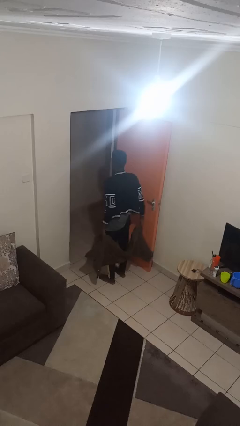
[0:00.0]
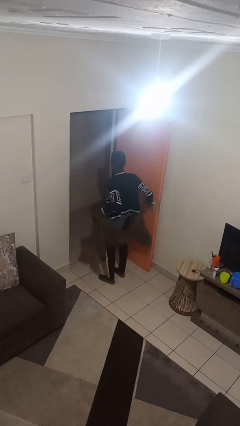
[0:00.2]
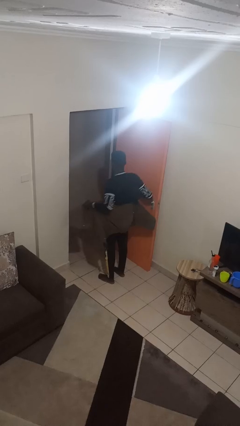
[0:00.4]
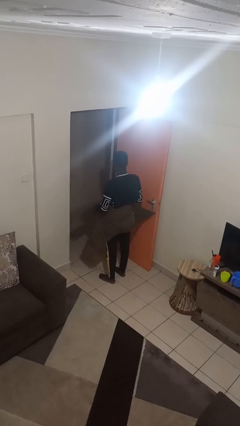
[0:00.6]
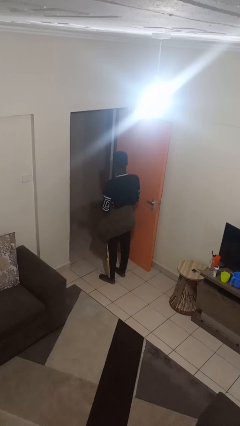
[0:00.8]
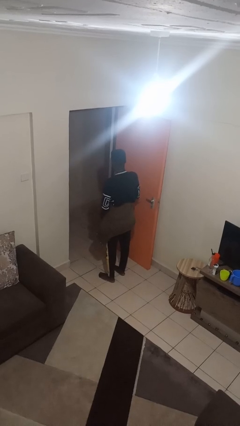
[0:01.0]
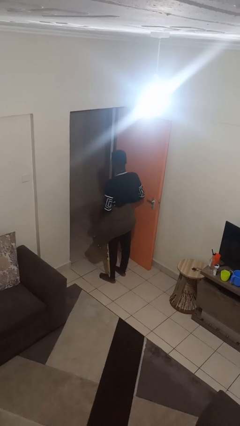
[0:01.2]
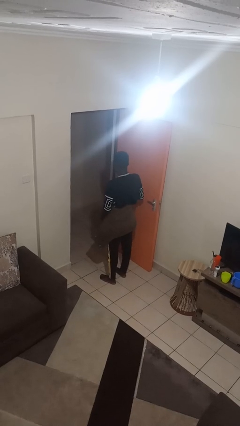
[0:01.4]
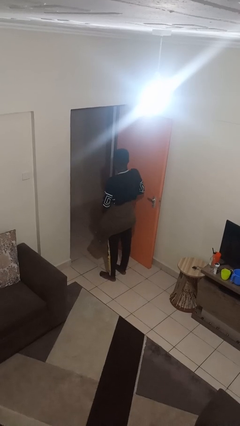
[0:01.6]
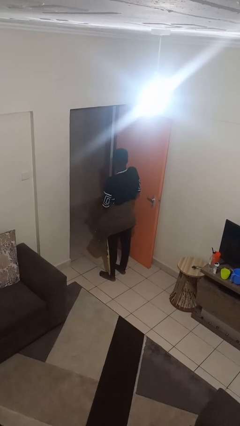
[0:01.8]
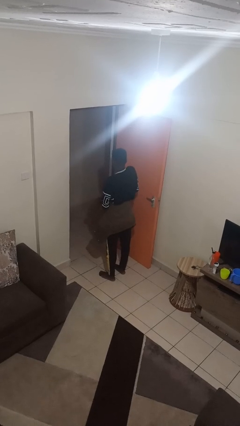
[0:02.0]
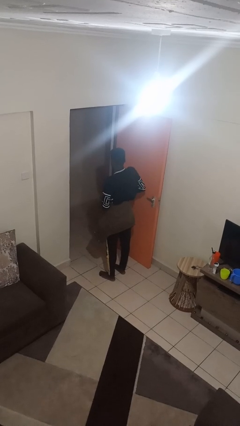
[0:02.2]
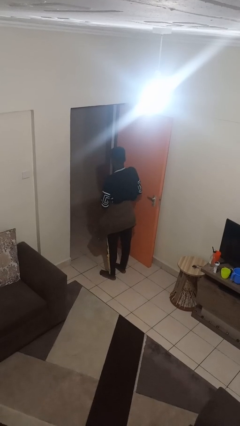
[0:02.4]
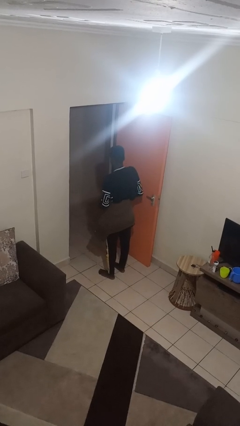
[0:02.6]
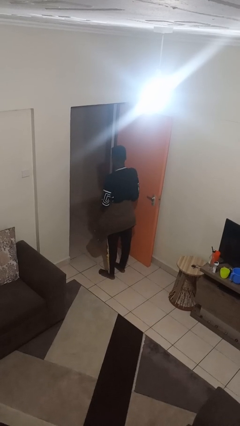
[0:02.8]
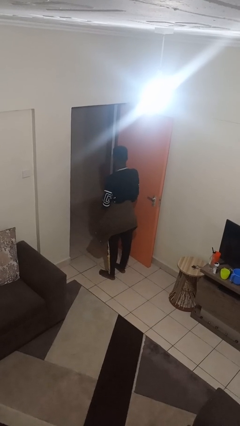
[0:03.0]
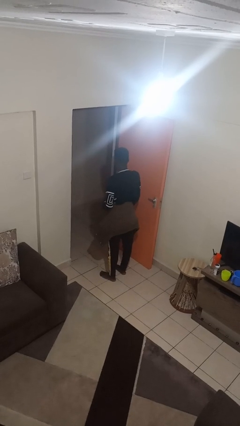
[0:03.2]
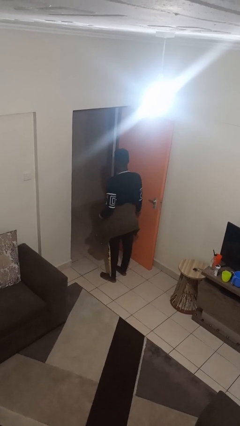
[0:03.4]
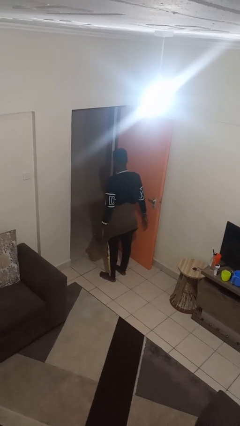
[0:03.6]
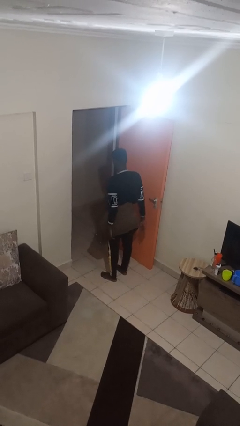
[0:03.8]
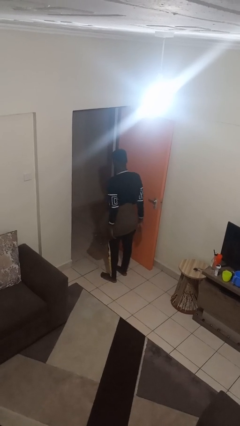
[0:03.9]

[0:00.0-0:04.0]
person ties jacket around waist

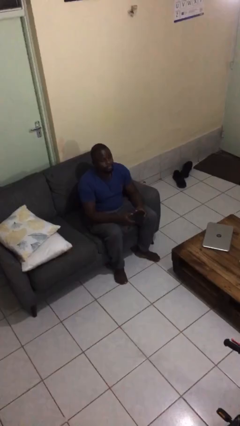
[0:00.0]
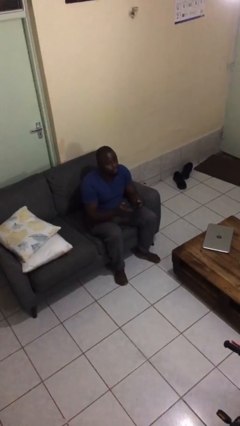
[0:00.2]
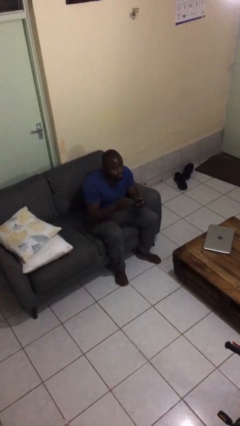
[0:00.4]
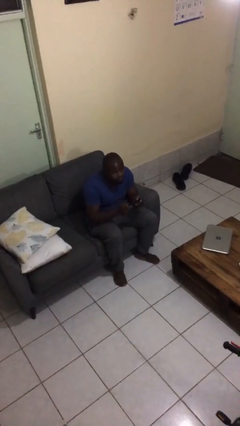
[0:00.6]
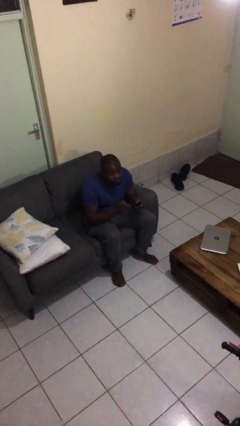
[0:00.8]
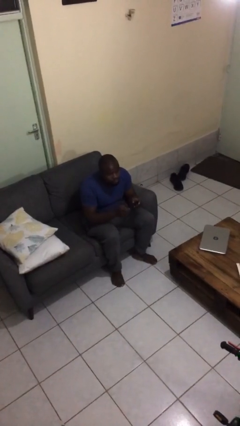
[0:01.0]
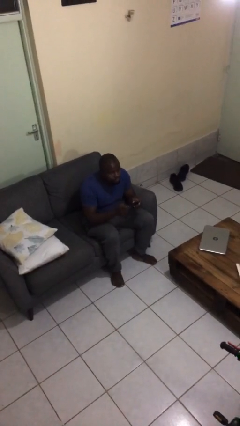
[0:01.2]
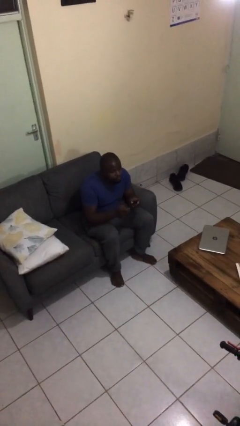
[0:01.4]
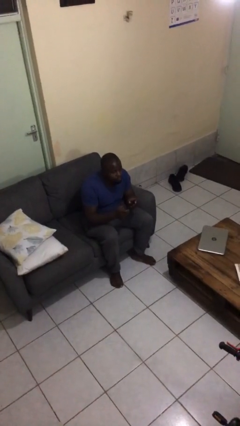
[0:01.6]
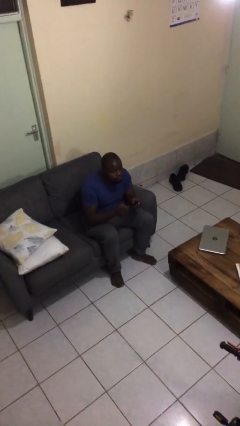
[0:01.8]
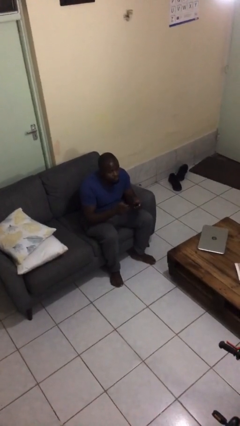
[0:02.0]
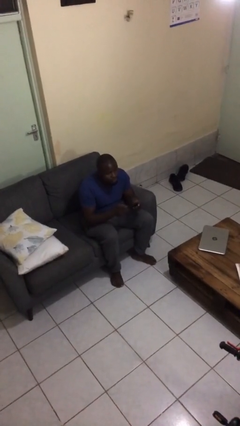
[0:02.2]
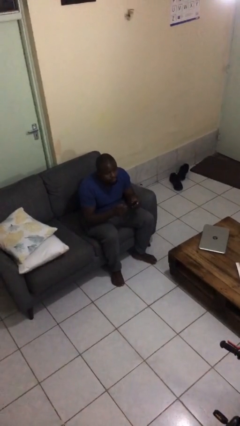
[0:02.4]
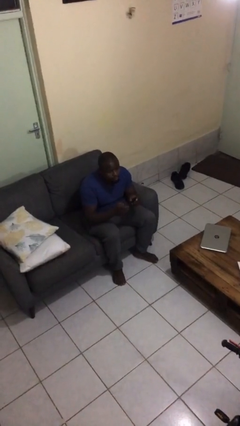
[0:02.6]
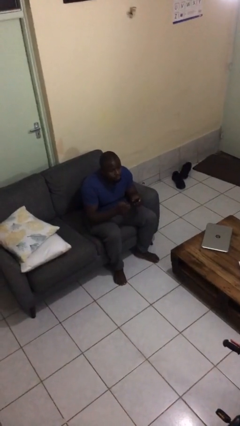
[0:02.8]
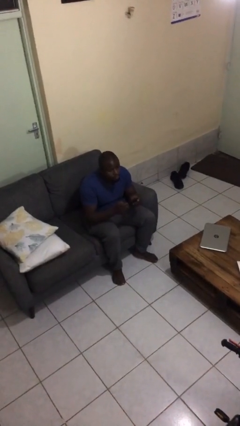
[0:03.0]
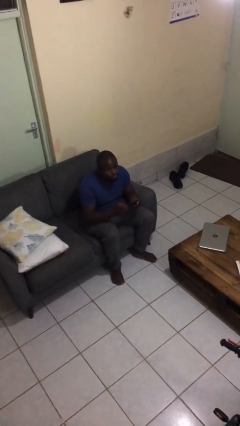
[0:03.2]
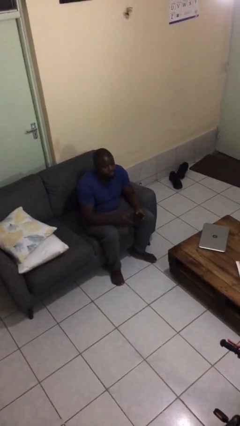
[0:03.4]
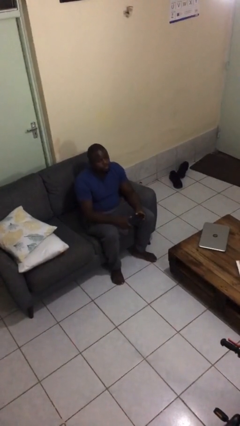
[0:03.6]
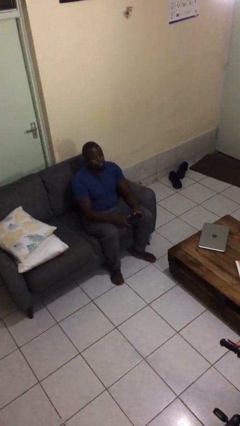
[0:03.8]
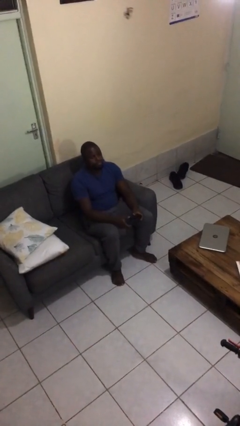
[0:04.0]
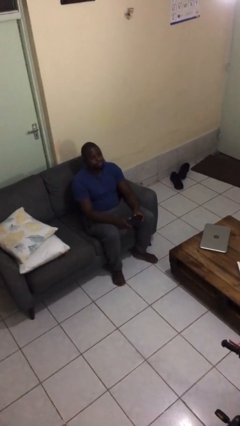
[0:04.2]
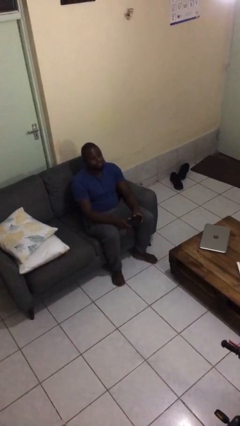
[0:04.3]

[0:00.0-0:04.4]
person interacts with handheld game

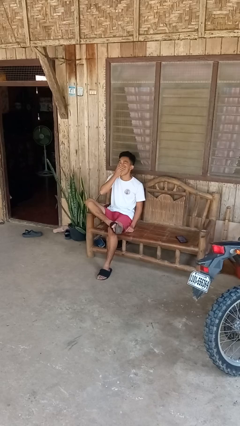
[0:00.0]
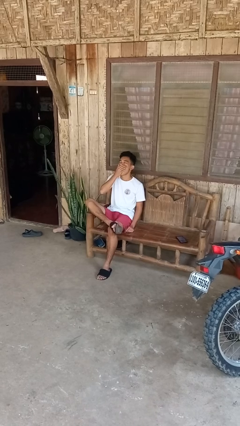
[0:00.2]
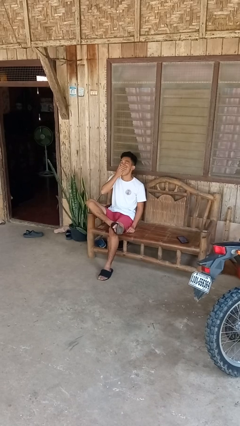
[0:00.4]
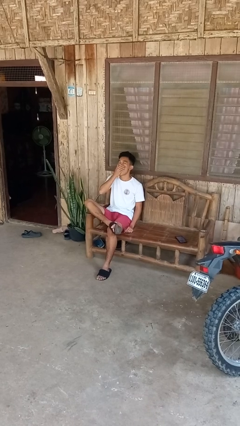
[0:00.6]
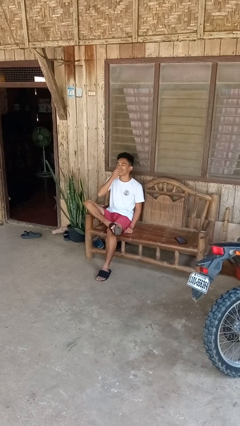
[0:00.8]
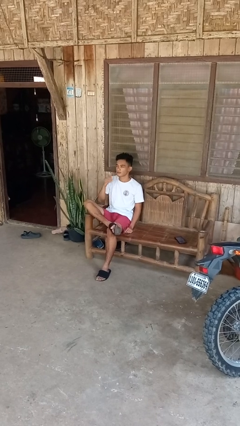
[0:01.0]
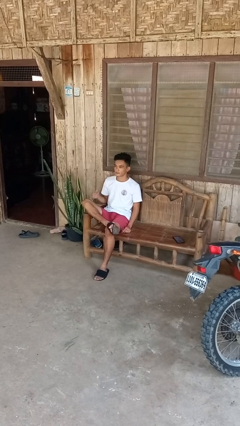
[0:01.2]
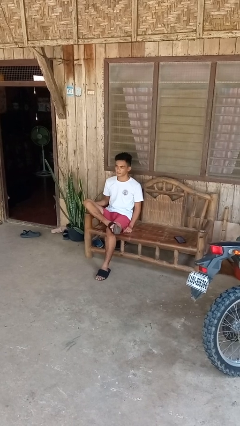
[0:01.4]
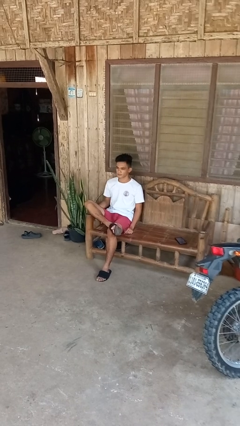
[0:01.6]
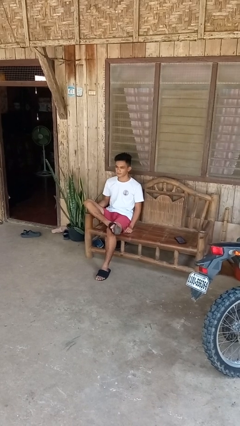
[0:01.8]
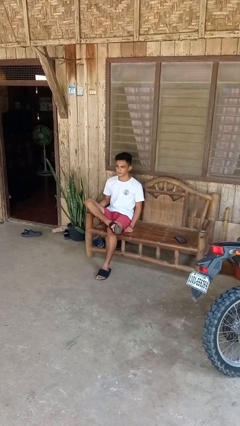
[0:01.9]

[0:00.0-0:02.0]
person yawns

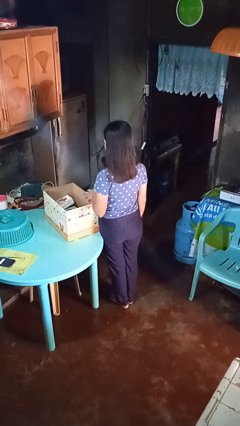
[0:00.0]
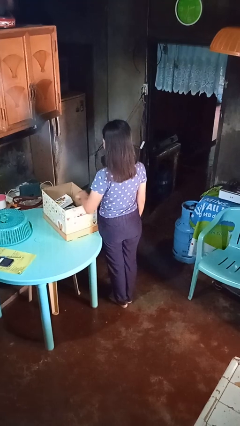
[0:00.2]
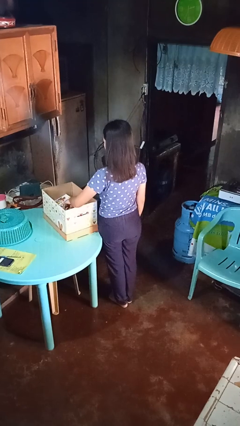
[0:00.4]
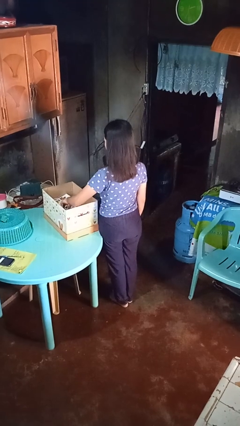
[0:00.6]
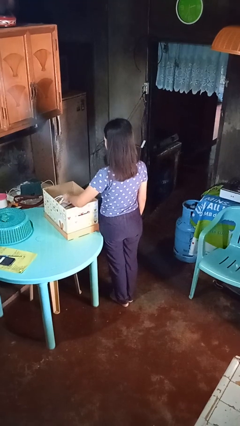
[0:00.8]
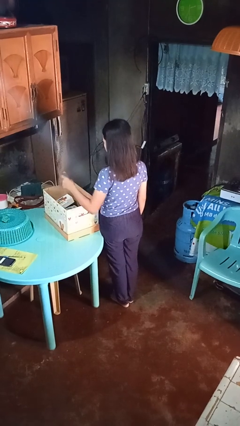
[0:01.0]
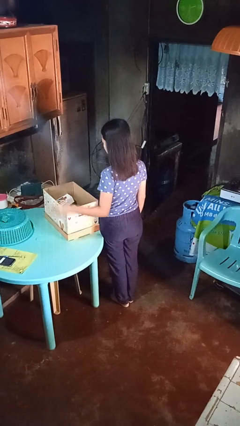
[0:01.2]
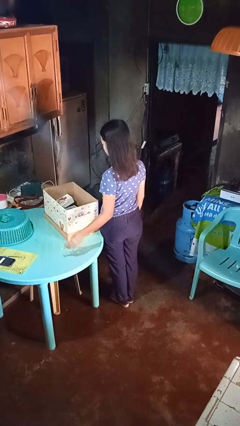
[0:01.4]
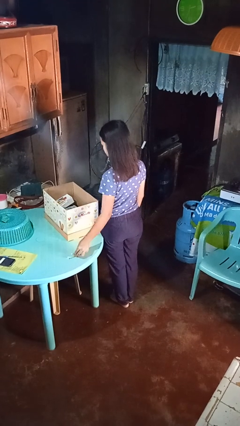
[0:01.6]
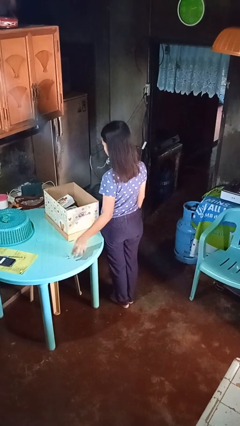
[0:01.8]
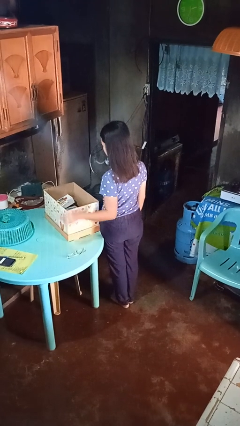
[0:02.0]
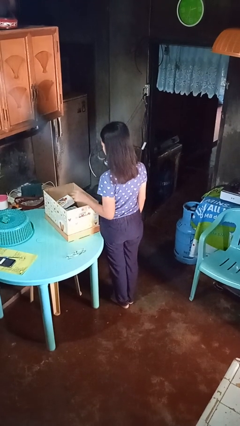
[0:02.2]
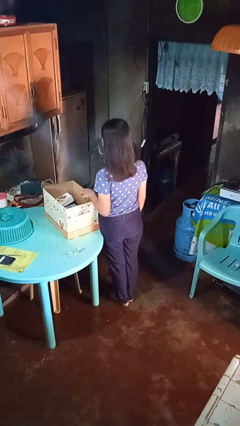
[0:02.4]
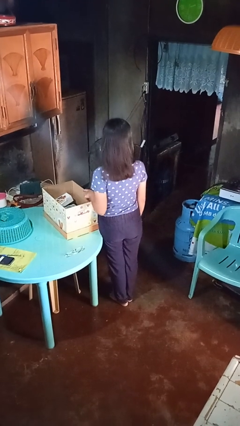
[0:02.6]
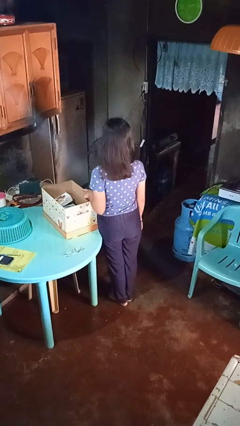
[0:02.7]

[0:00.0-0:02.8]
person takes object from box

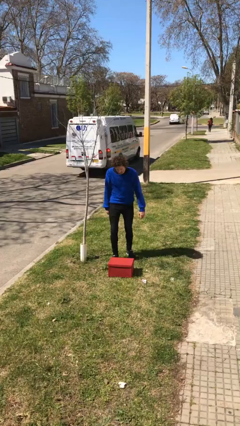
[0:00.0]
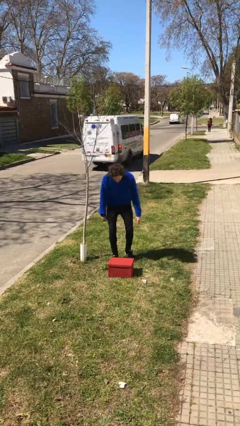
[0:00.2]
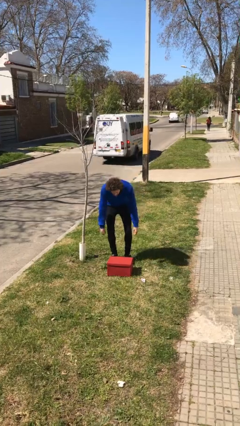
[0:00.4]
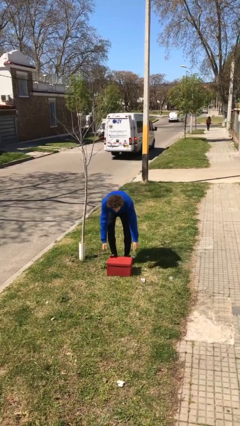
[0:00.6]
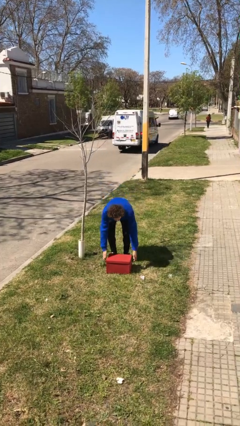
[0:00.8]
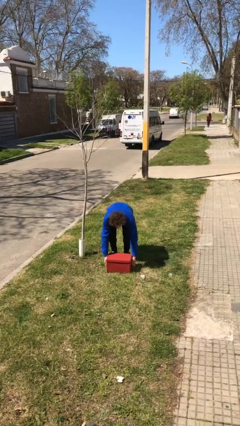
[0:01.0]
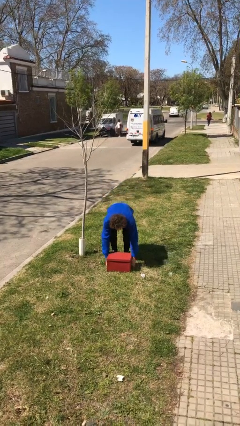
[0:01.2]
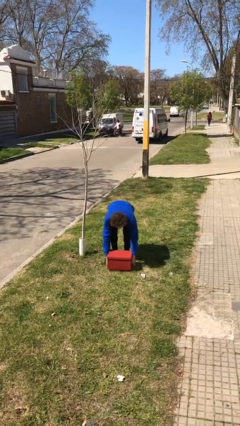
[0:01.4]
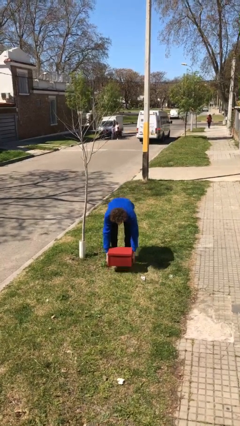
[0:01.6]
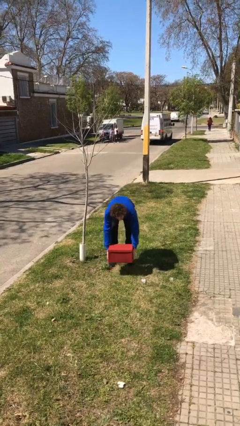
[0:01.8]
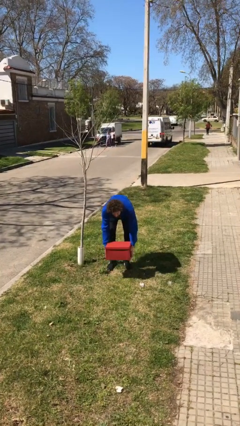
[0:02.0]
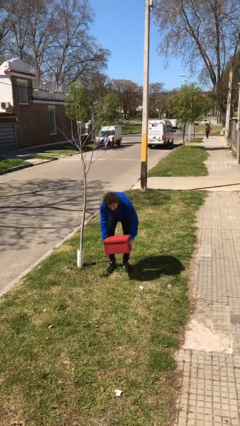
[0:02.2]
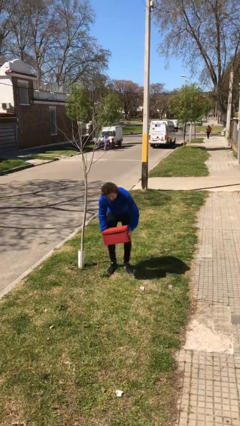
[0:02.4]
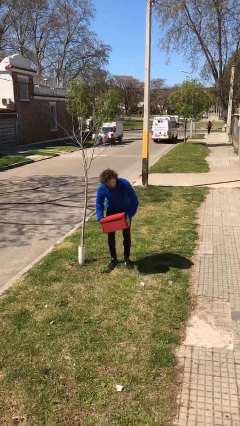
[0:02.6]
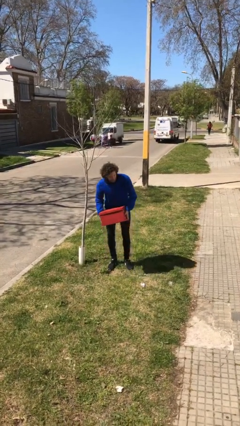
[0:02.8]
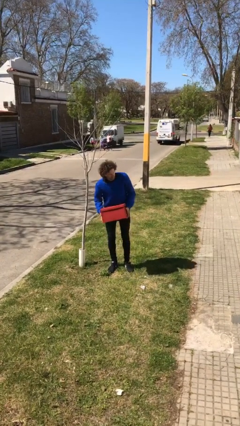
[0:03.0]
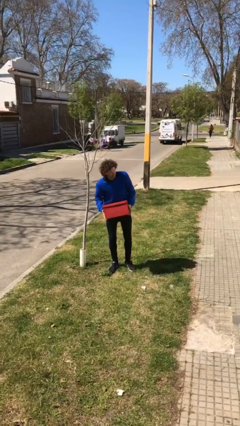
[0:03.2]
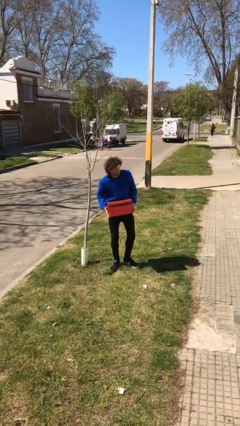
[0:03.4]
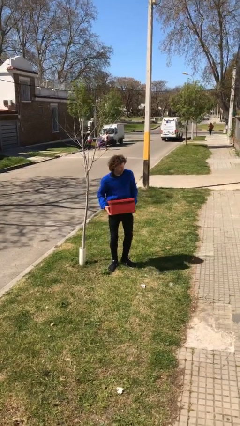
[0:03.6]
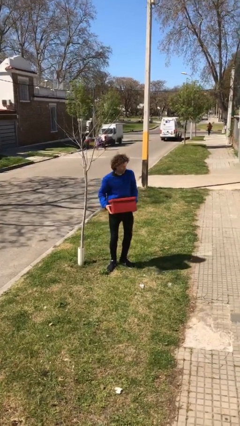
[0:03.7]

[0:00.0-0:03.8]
person picks up object from floor

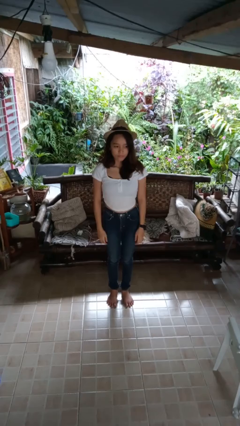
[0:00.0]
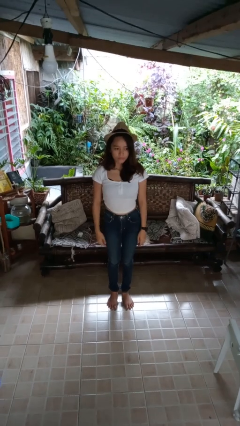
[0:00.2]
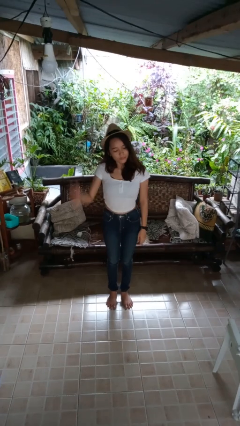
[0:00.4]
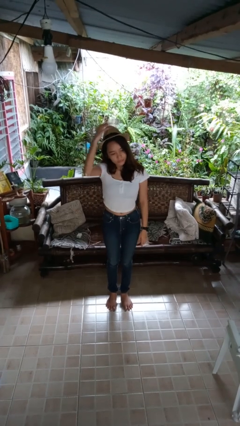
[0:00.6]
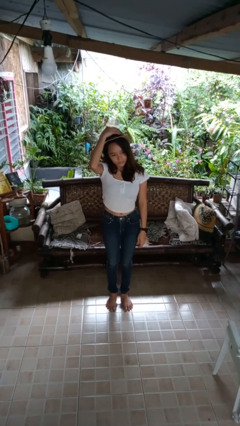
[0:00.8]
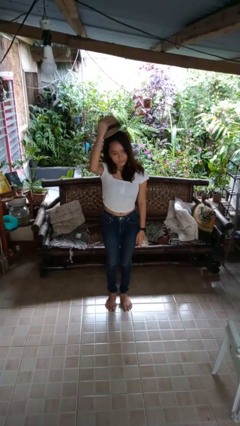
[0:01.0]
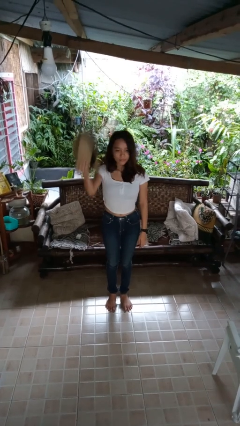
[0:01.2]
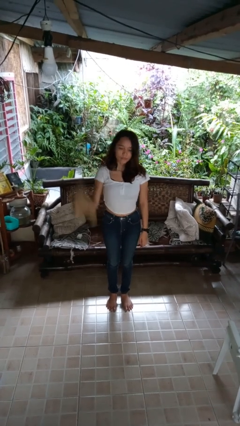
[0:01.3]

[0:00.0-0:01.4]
person takes off hat
